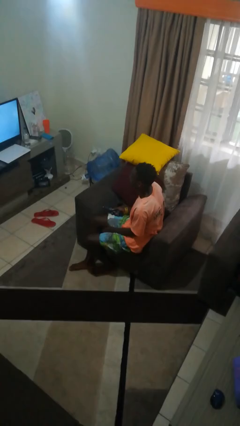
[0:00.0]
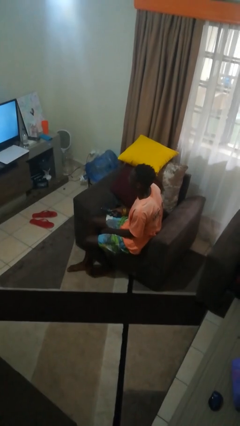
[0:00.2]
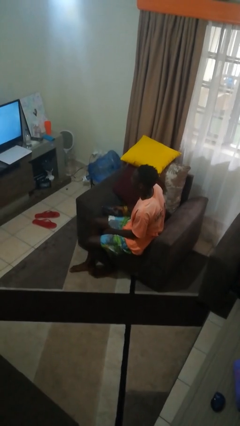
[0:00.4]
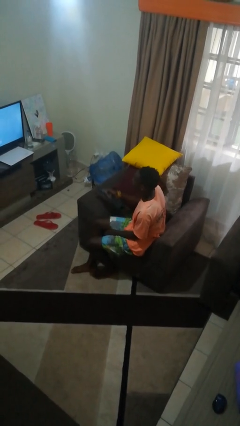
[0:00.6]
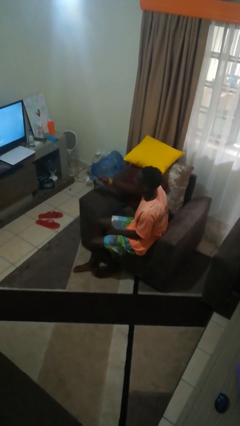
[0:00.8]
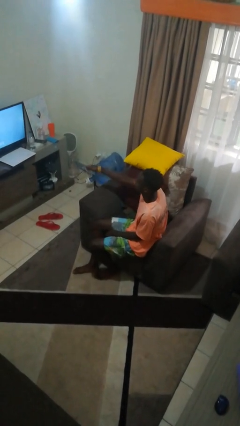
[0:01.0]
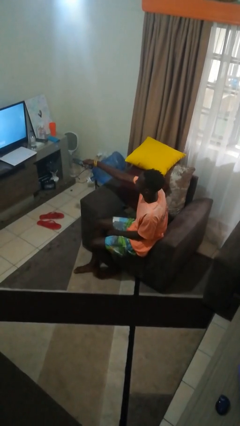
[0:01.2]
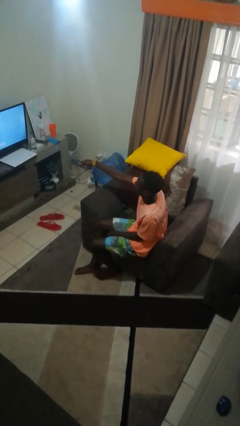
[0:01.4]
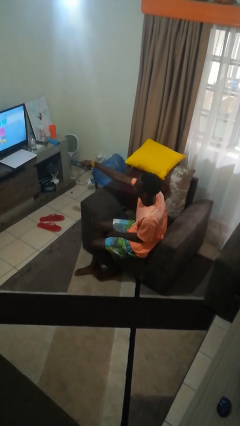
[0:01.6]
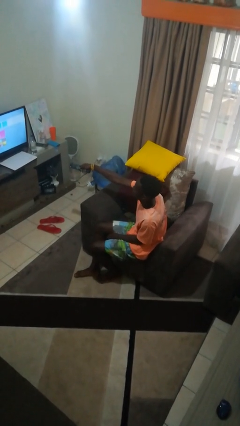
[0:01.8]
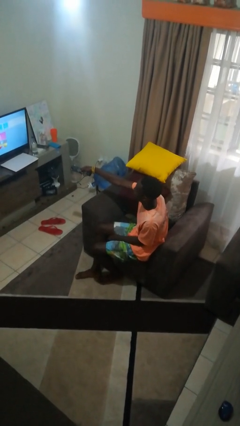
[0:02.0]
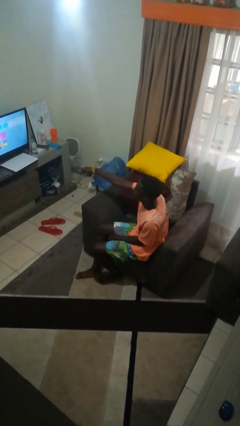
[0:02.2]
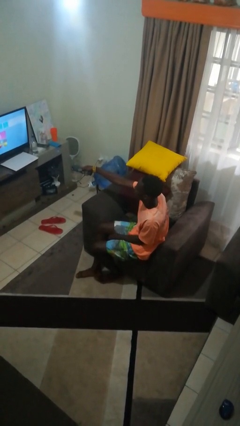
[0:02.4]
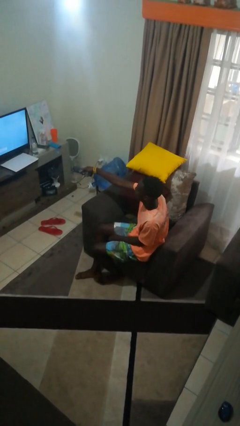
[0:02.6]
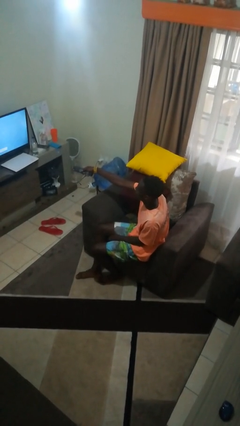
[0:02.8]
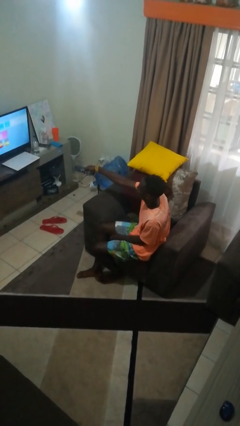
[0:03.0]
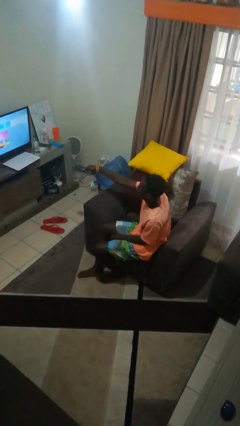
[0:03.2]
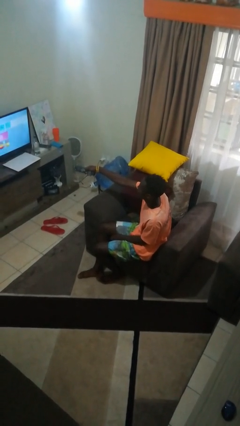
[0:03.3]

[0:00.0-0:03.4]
person uses television remote

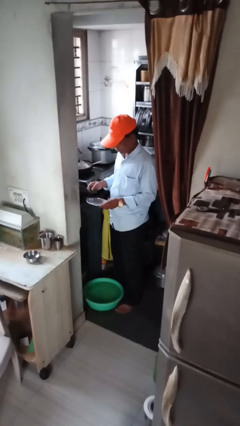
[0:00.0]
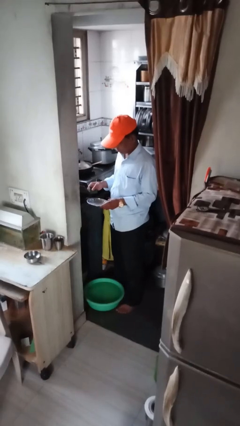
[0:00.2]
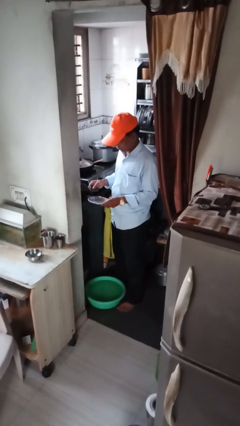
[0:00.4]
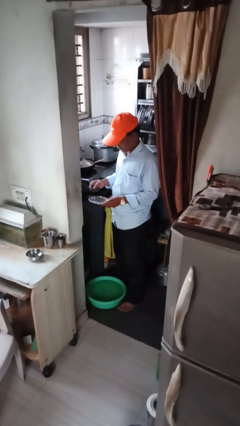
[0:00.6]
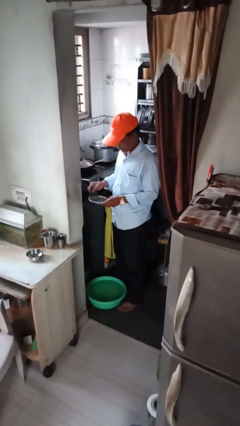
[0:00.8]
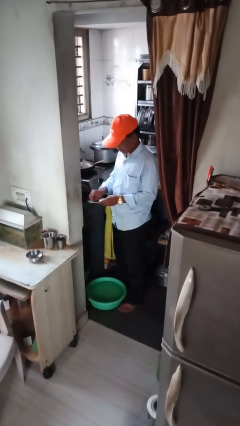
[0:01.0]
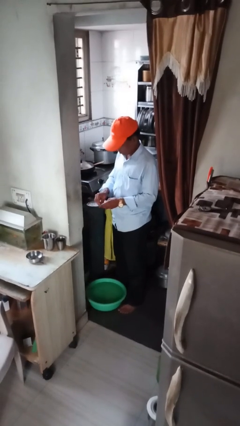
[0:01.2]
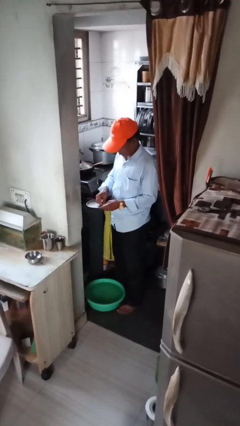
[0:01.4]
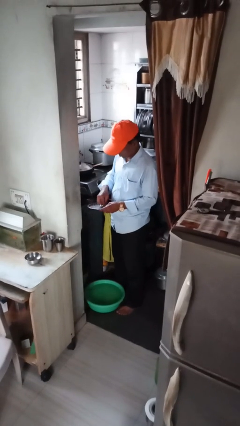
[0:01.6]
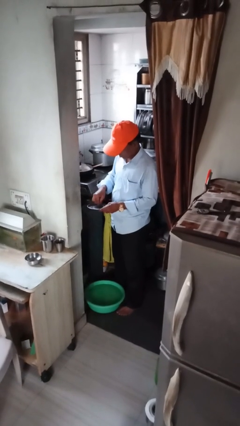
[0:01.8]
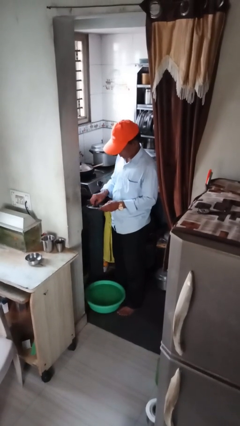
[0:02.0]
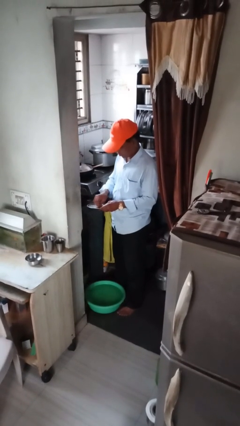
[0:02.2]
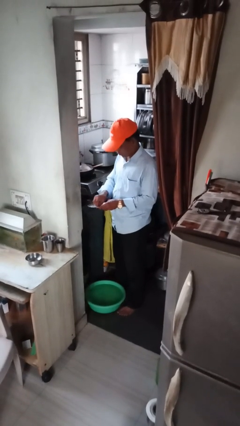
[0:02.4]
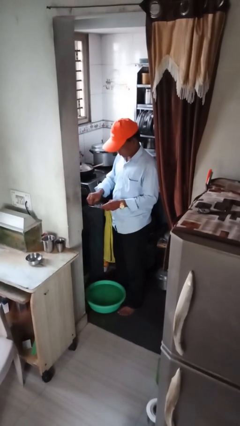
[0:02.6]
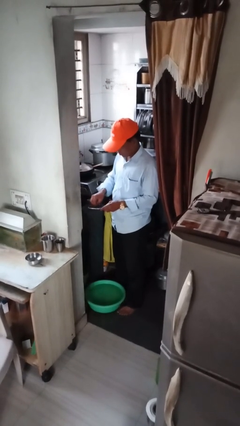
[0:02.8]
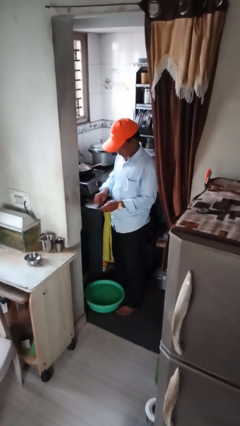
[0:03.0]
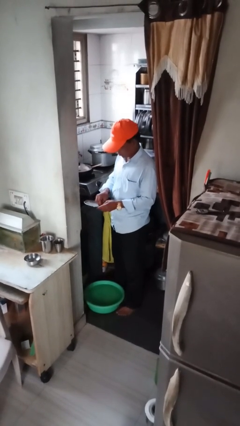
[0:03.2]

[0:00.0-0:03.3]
person washes dish

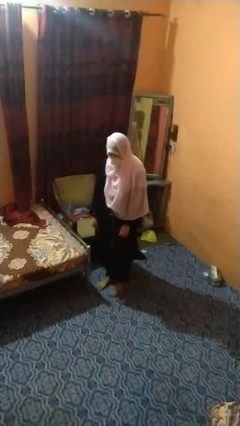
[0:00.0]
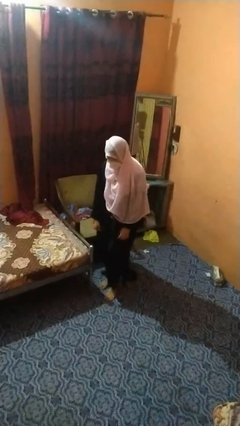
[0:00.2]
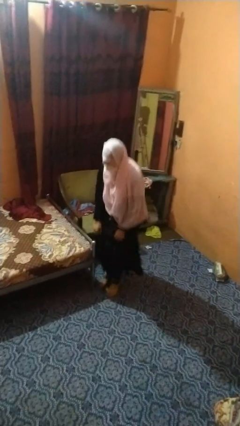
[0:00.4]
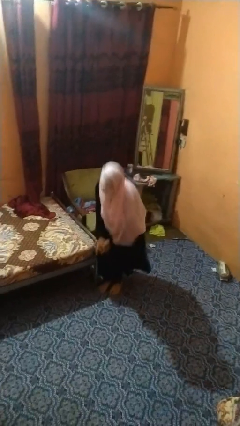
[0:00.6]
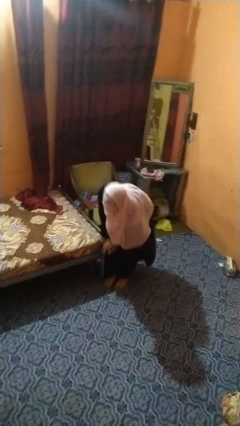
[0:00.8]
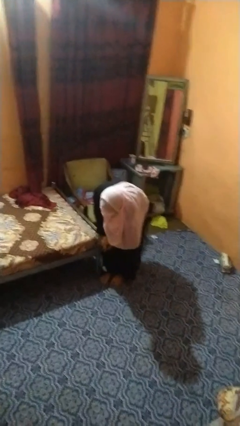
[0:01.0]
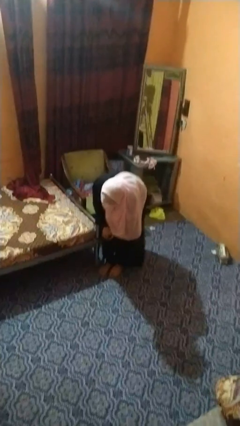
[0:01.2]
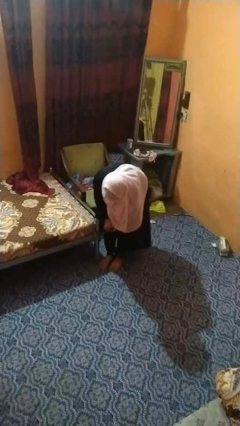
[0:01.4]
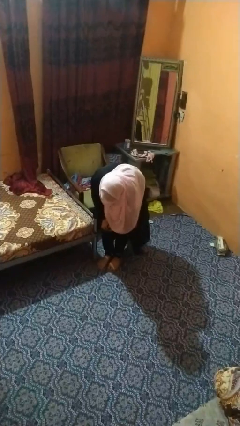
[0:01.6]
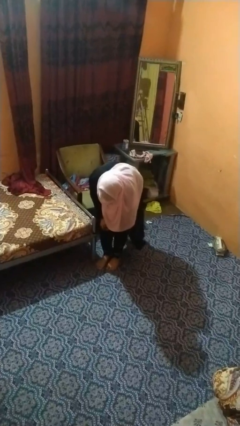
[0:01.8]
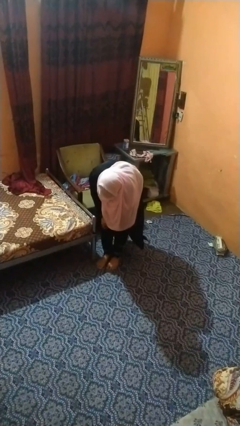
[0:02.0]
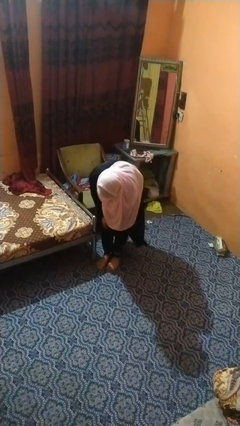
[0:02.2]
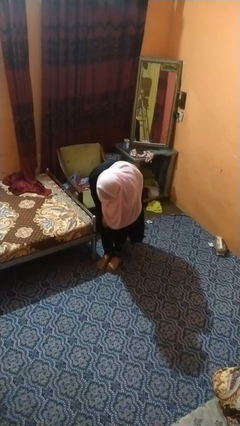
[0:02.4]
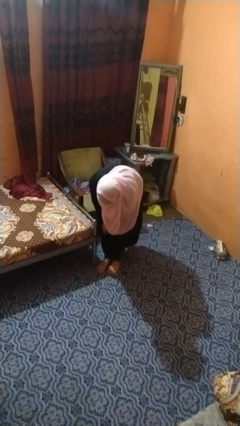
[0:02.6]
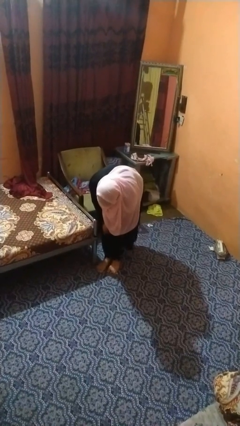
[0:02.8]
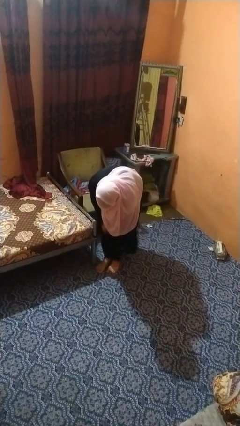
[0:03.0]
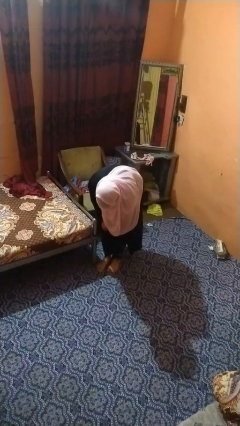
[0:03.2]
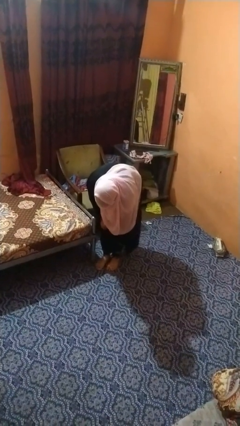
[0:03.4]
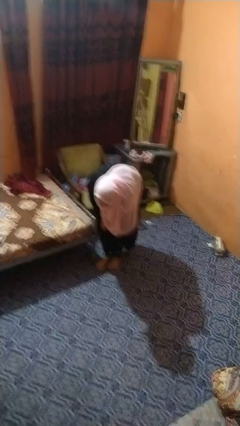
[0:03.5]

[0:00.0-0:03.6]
person trips on object on floor

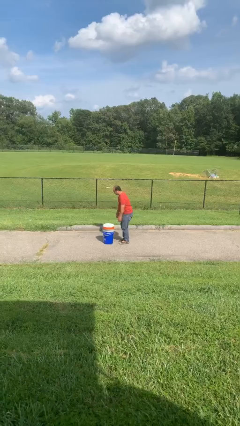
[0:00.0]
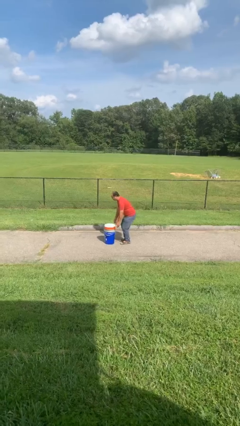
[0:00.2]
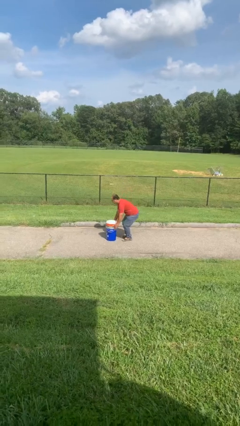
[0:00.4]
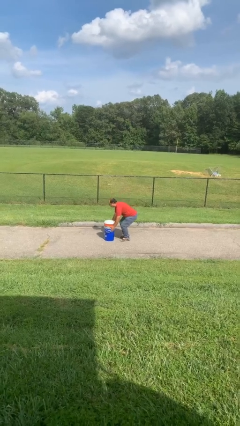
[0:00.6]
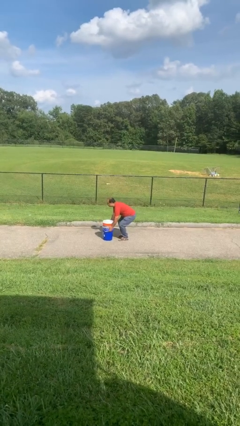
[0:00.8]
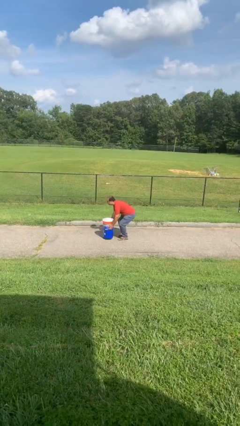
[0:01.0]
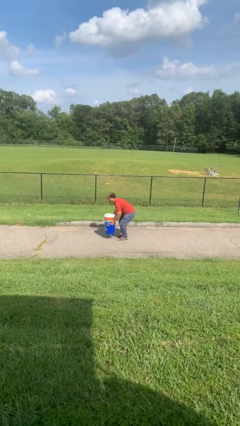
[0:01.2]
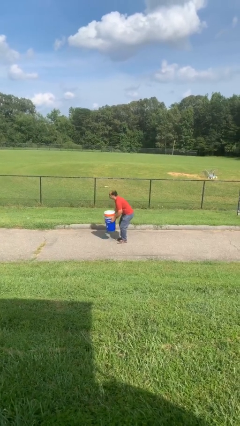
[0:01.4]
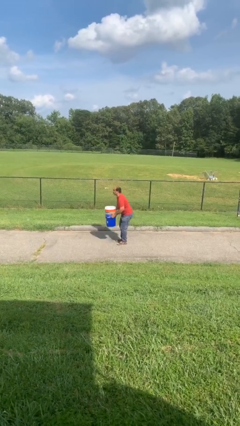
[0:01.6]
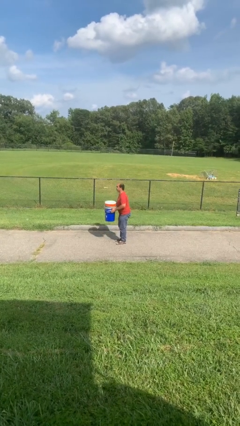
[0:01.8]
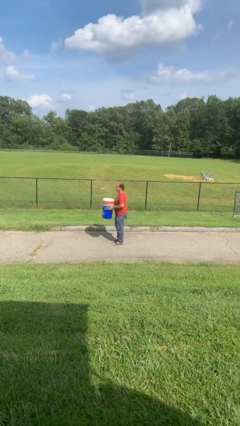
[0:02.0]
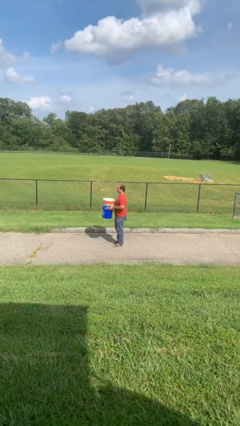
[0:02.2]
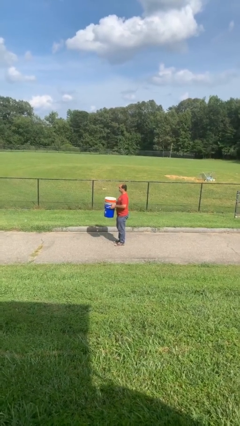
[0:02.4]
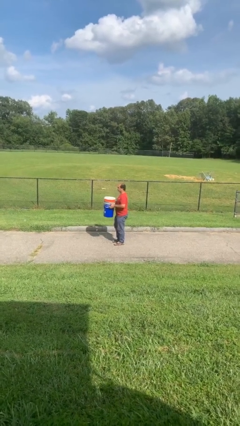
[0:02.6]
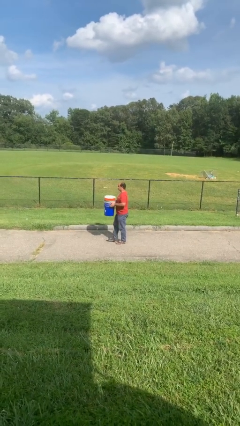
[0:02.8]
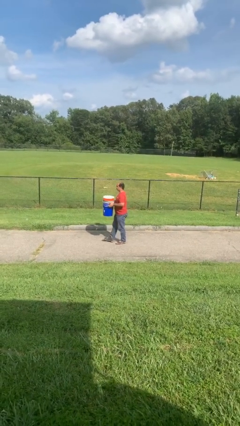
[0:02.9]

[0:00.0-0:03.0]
person picks up object from floor

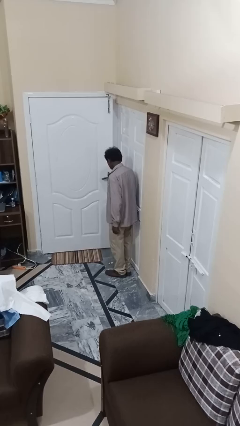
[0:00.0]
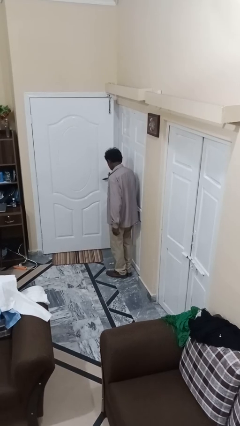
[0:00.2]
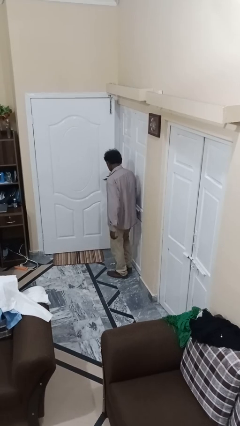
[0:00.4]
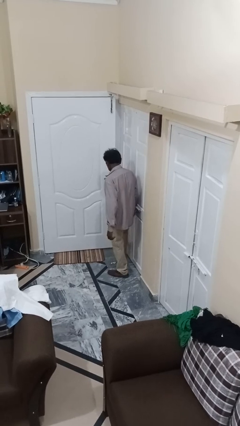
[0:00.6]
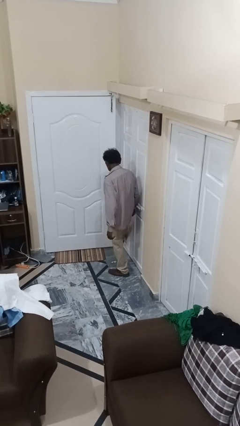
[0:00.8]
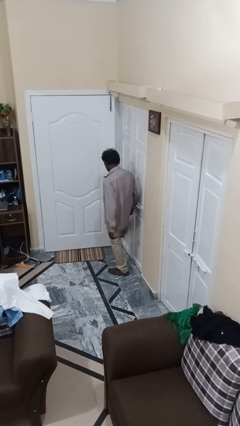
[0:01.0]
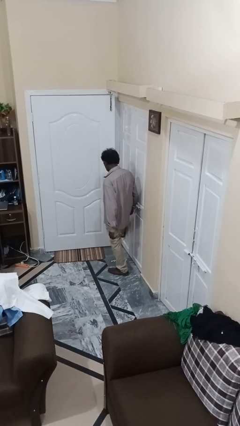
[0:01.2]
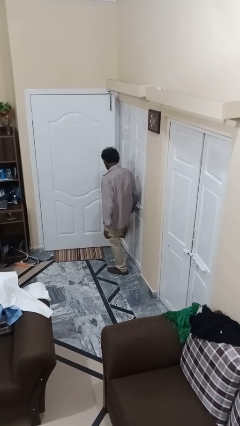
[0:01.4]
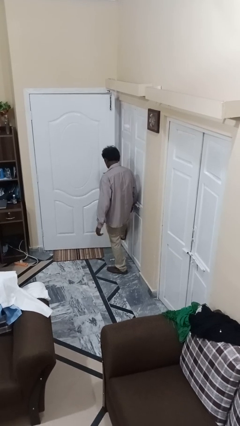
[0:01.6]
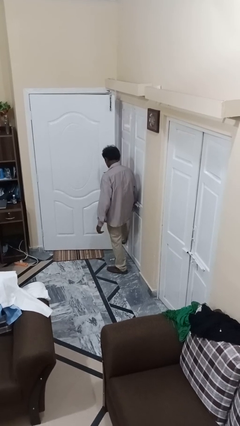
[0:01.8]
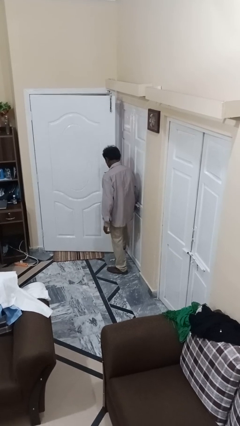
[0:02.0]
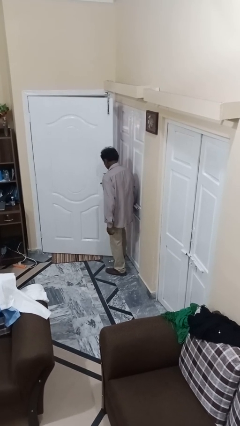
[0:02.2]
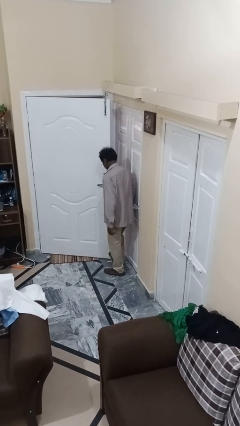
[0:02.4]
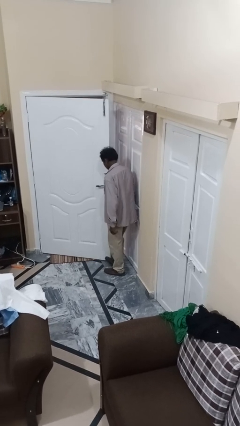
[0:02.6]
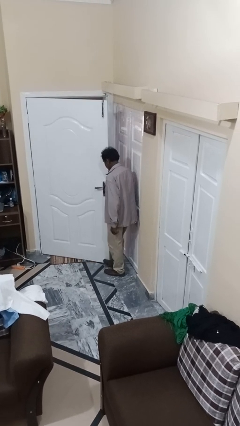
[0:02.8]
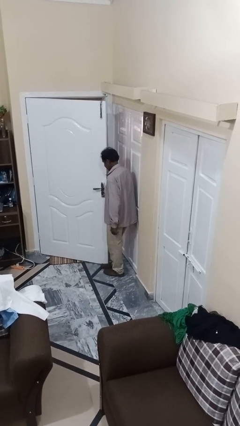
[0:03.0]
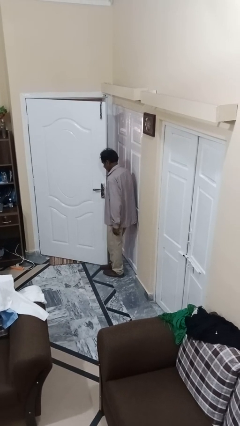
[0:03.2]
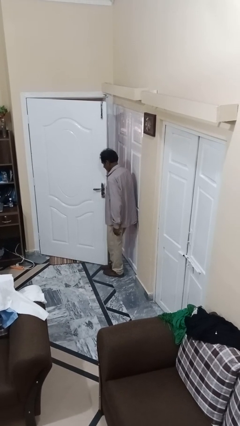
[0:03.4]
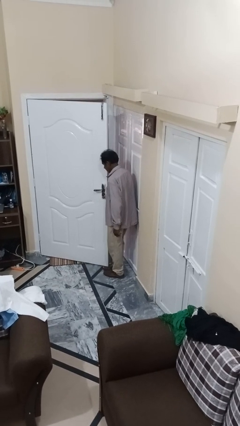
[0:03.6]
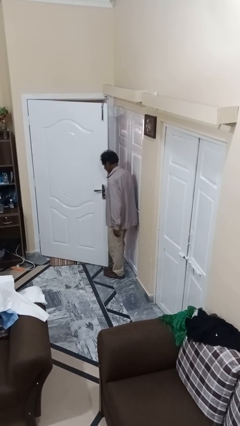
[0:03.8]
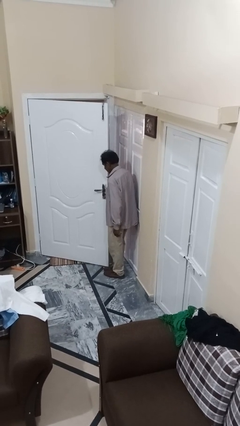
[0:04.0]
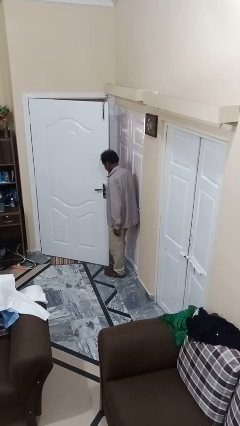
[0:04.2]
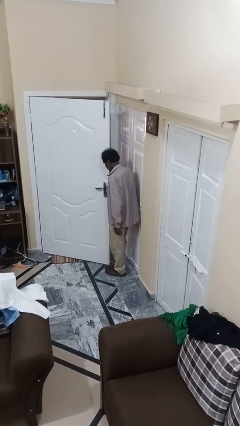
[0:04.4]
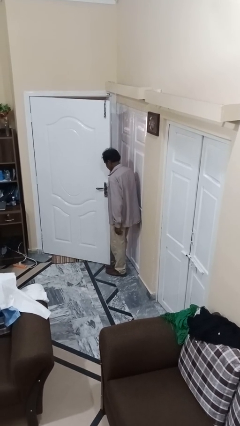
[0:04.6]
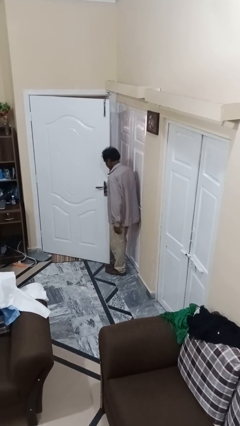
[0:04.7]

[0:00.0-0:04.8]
person opens facility door
